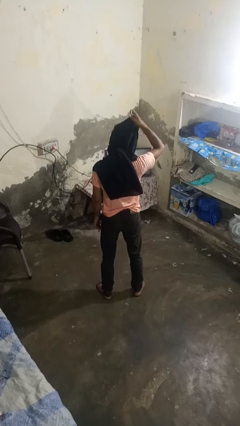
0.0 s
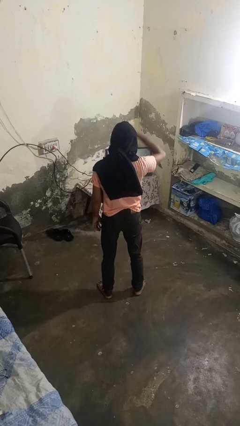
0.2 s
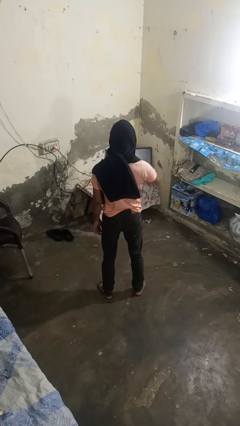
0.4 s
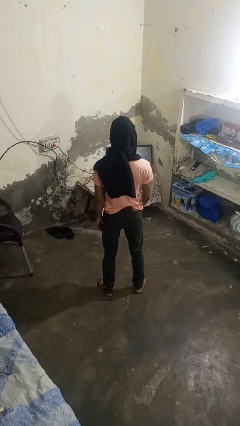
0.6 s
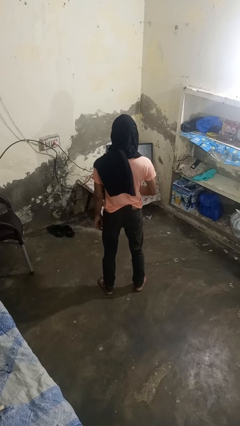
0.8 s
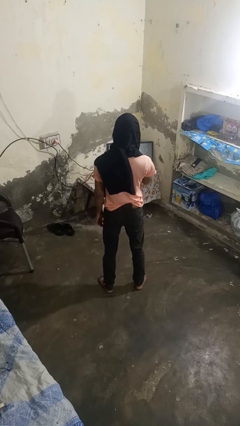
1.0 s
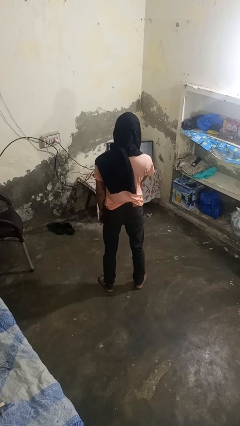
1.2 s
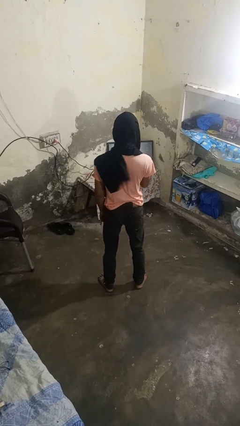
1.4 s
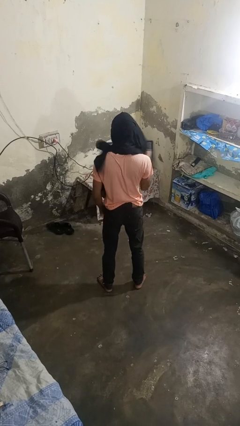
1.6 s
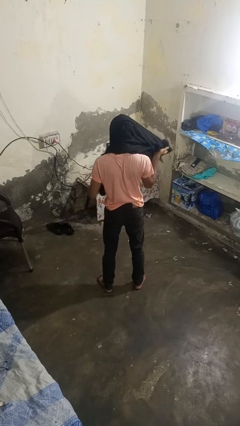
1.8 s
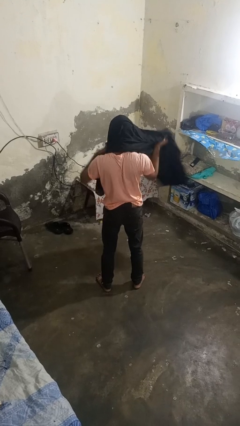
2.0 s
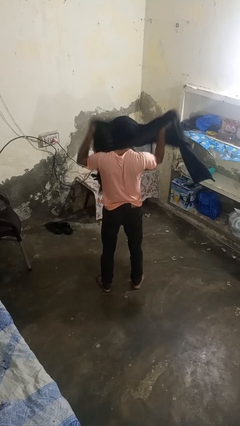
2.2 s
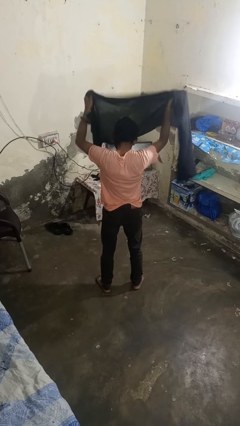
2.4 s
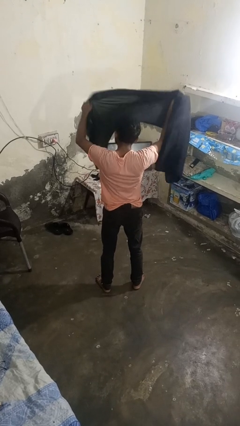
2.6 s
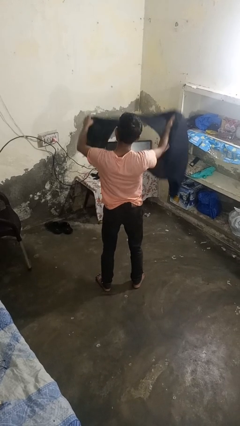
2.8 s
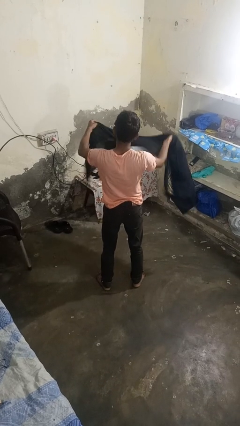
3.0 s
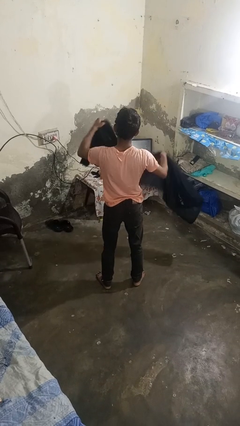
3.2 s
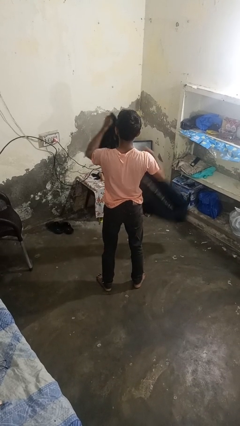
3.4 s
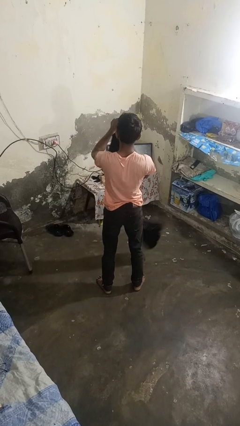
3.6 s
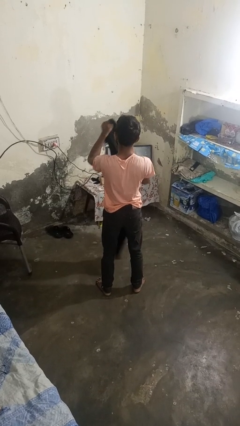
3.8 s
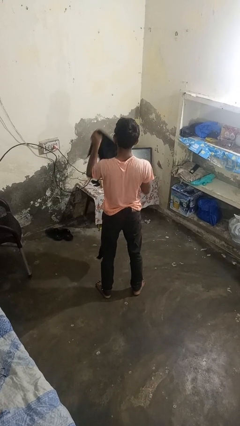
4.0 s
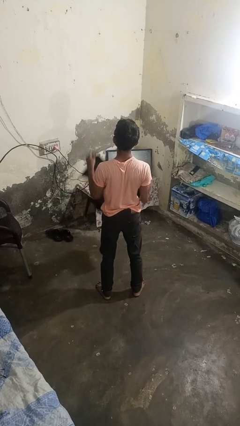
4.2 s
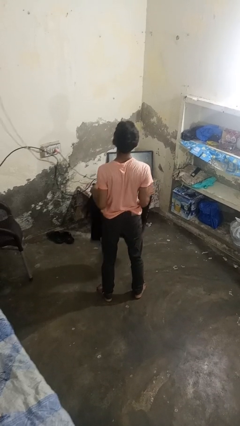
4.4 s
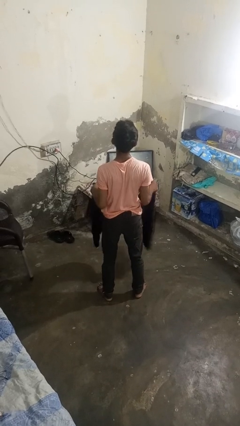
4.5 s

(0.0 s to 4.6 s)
person takes off scarf

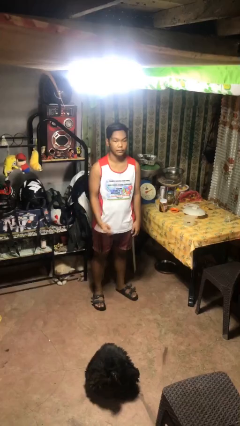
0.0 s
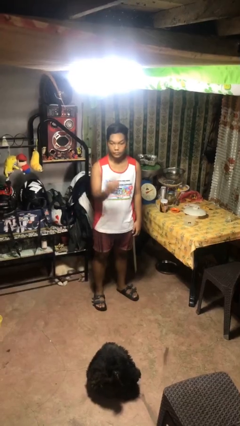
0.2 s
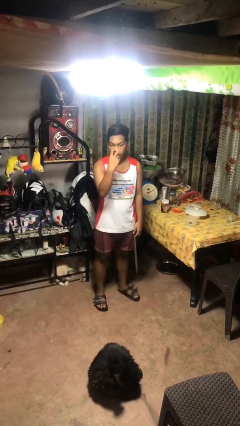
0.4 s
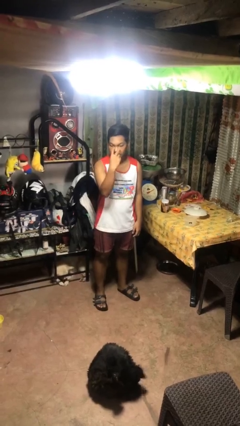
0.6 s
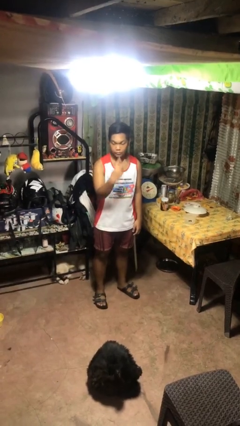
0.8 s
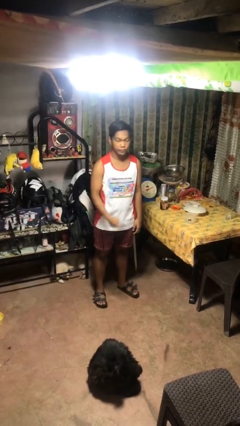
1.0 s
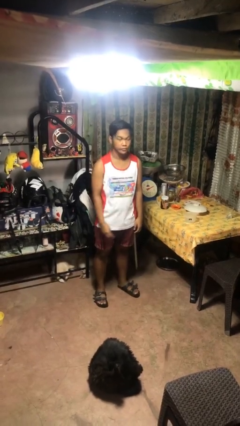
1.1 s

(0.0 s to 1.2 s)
person gestures watch closely

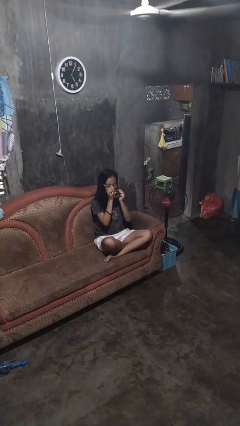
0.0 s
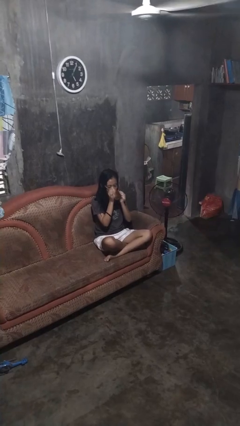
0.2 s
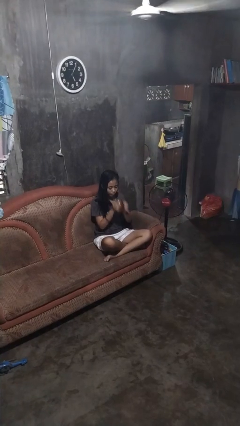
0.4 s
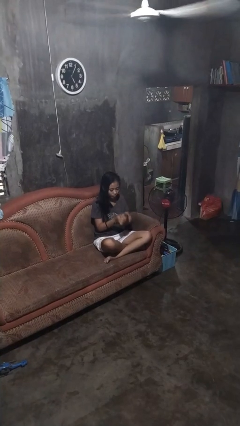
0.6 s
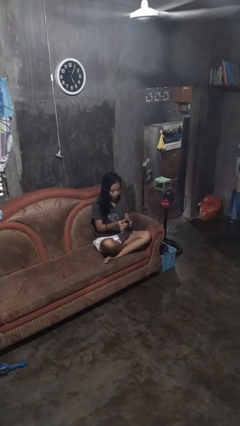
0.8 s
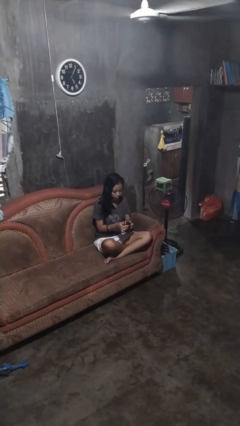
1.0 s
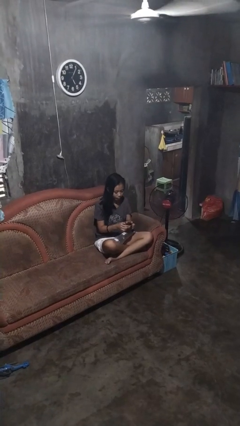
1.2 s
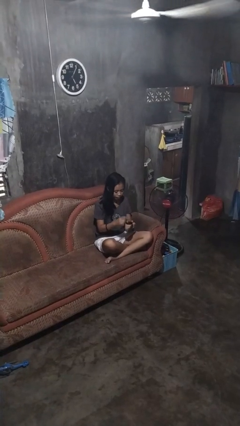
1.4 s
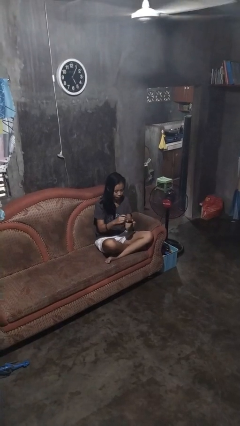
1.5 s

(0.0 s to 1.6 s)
person stirs mug

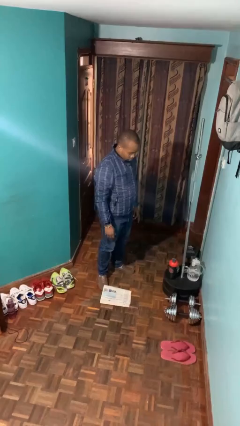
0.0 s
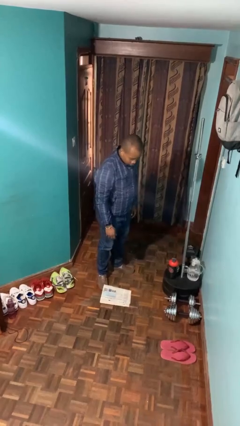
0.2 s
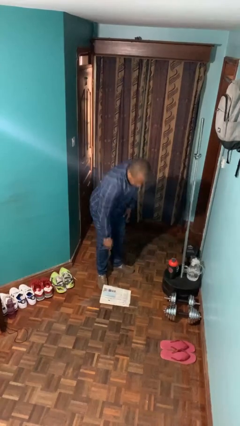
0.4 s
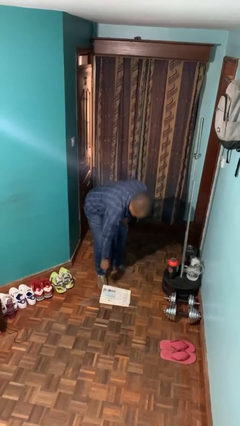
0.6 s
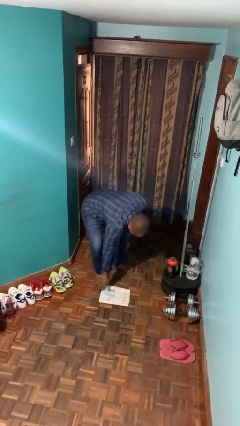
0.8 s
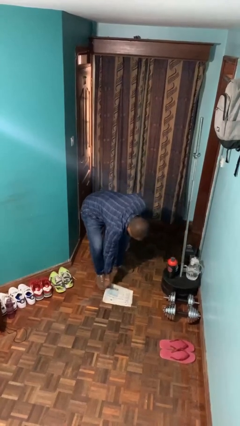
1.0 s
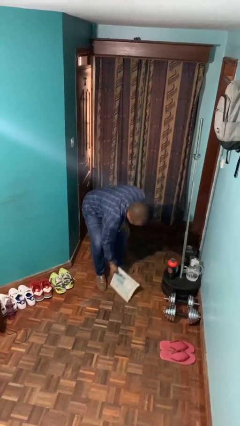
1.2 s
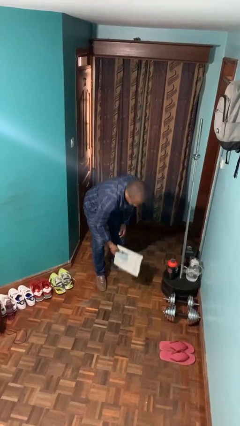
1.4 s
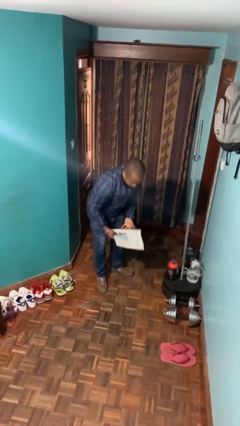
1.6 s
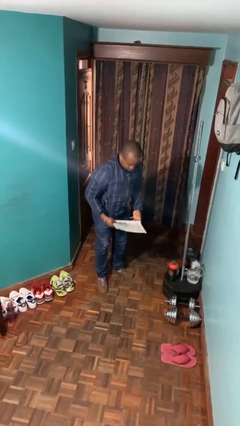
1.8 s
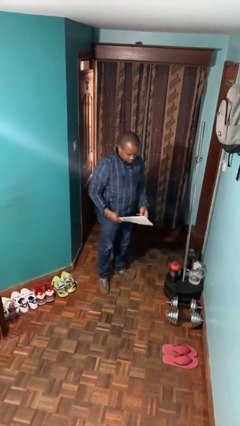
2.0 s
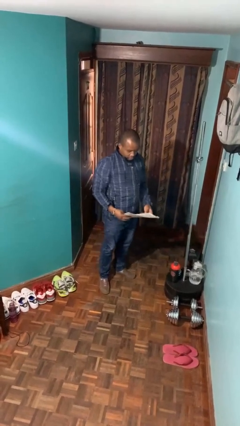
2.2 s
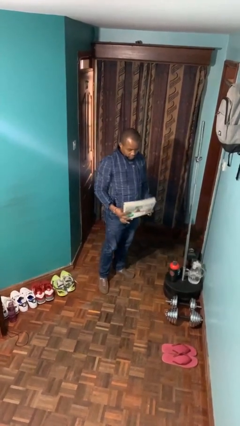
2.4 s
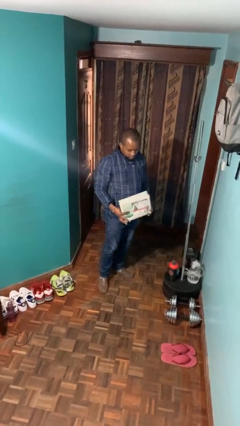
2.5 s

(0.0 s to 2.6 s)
person picks up object from floor

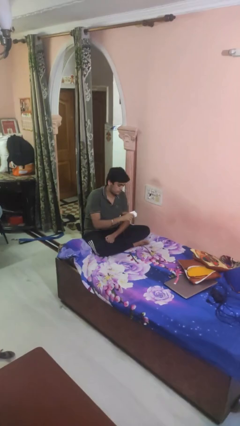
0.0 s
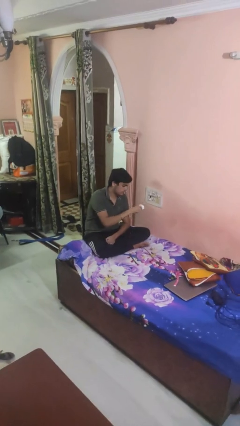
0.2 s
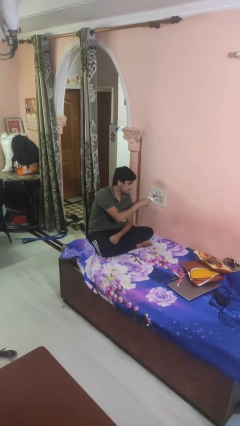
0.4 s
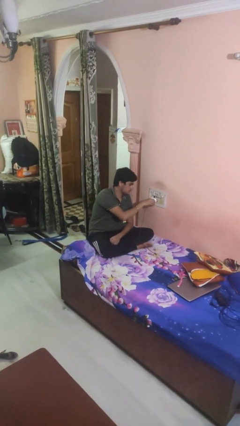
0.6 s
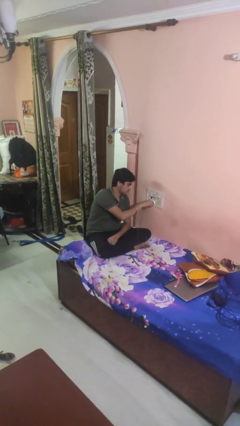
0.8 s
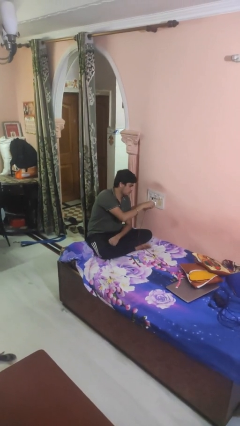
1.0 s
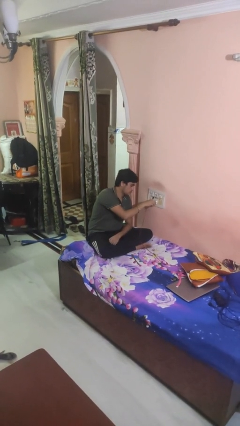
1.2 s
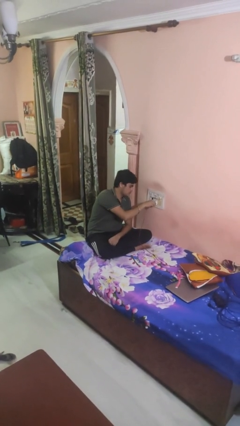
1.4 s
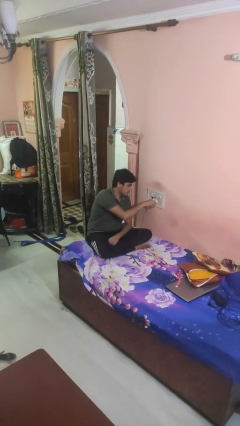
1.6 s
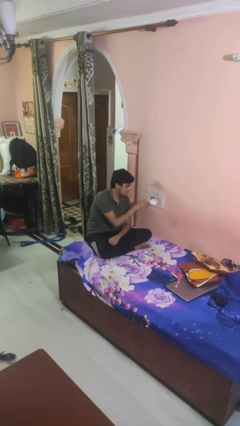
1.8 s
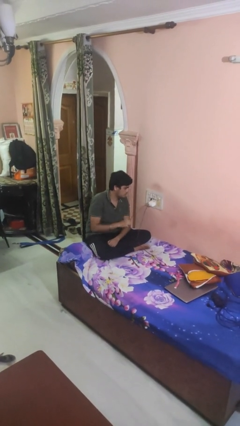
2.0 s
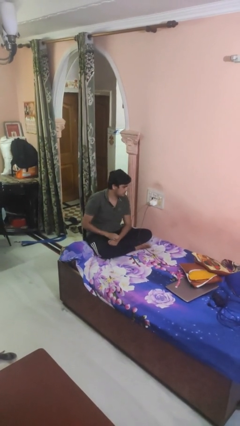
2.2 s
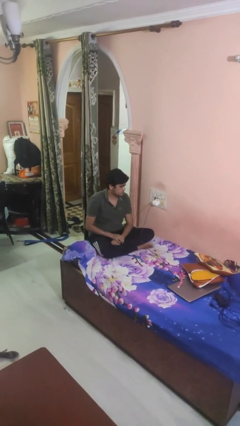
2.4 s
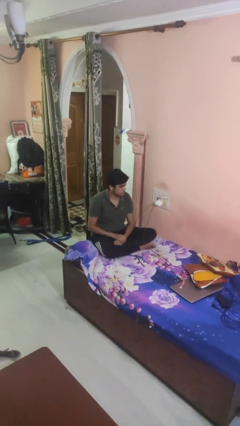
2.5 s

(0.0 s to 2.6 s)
person plugs into electrical socket

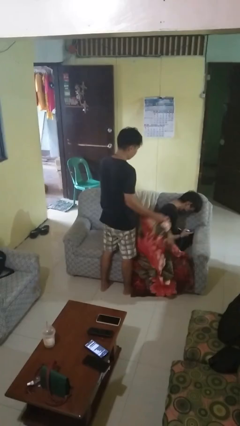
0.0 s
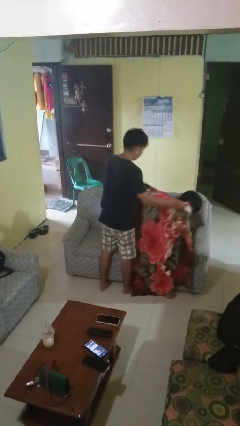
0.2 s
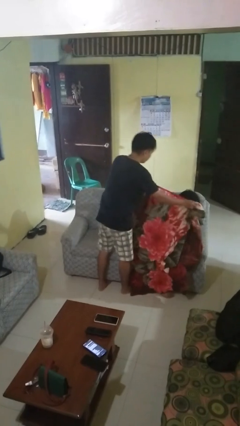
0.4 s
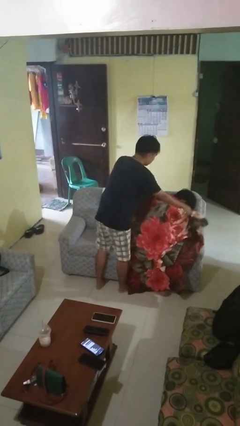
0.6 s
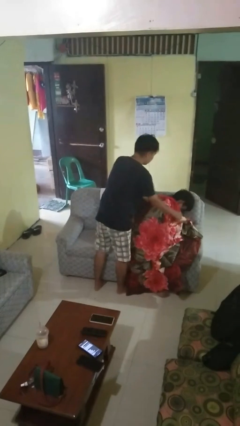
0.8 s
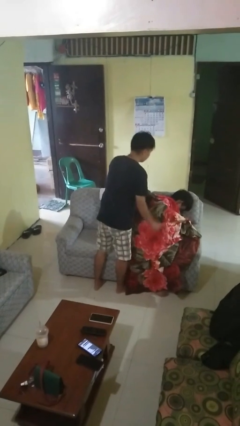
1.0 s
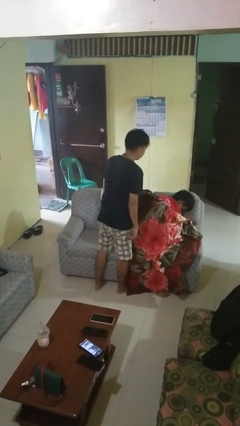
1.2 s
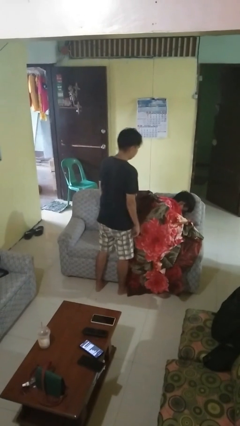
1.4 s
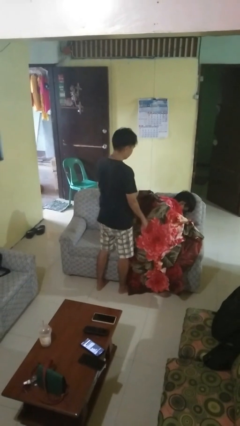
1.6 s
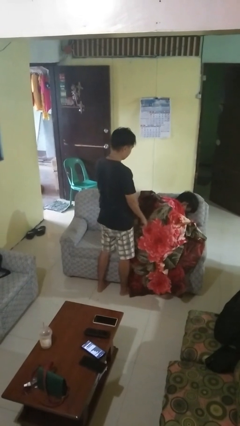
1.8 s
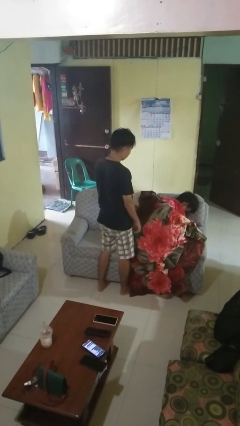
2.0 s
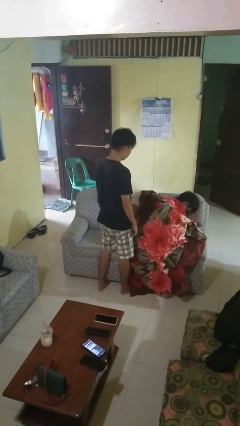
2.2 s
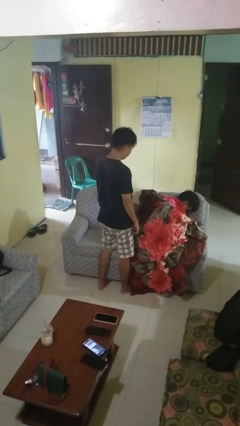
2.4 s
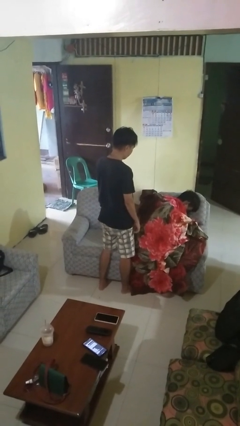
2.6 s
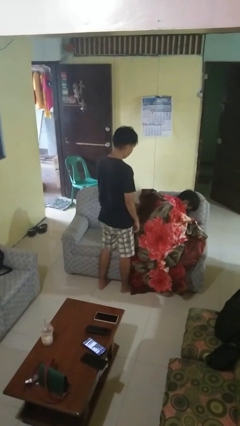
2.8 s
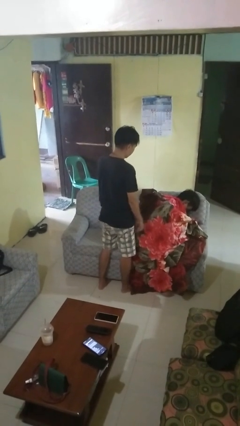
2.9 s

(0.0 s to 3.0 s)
person covers friend with blanket

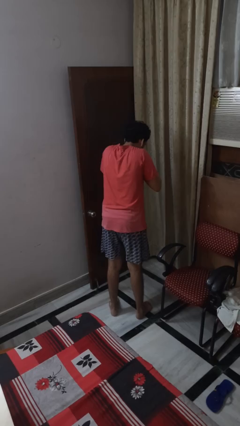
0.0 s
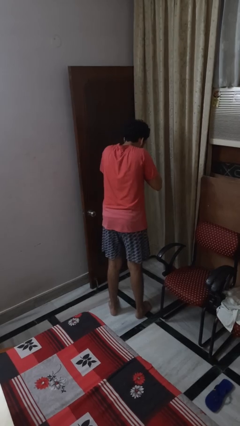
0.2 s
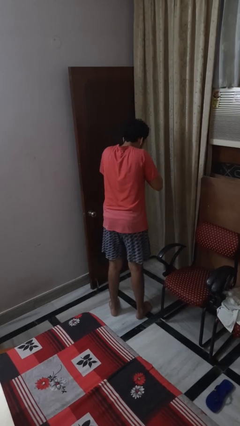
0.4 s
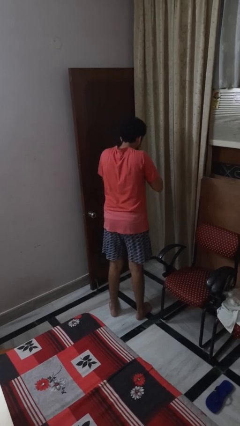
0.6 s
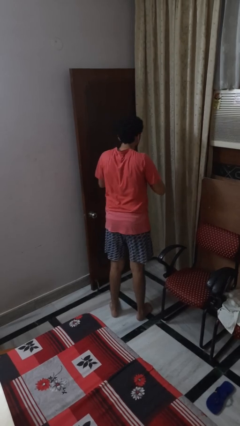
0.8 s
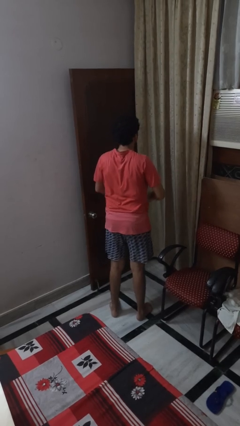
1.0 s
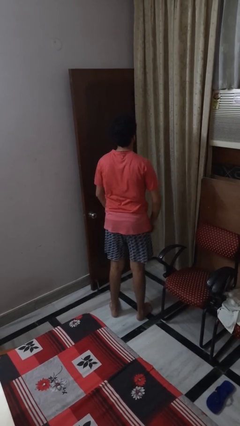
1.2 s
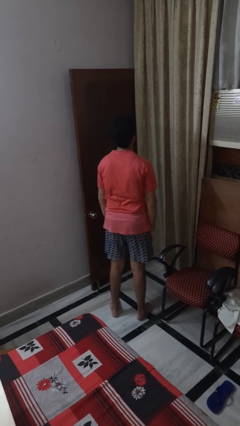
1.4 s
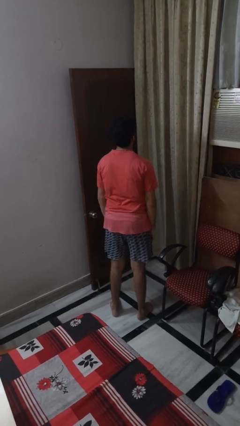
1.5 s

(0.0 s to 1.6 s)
person sneezes into hand
